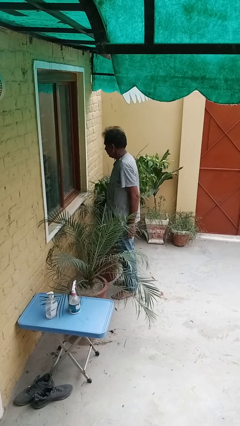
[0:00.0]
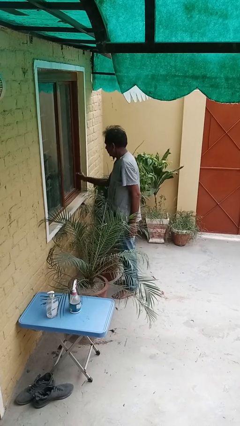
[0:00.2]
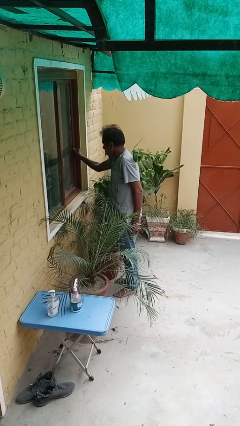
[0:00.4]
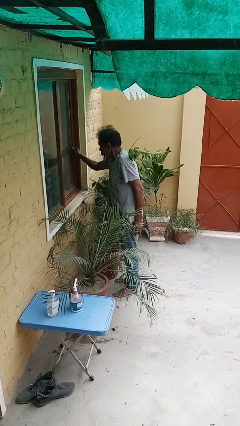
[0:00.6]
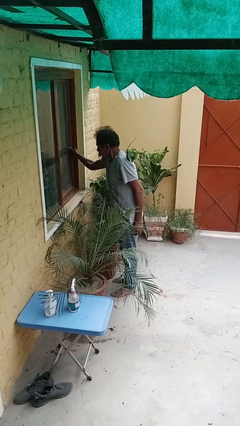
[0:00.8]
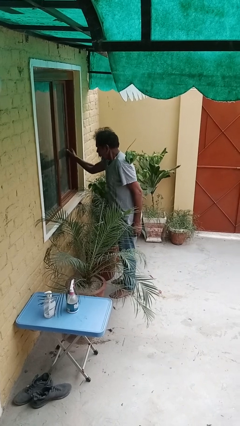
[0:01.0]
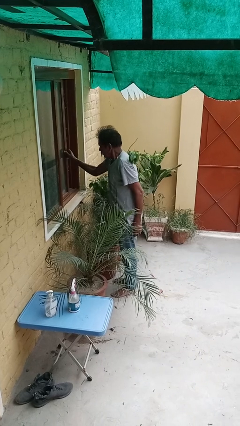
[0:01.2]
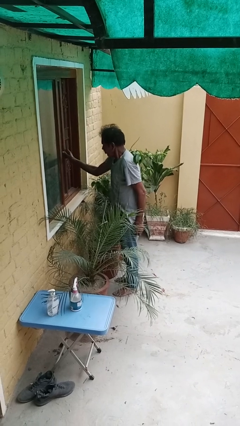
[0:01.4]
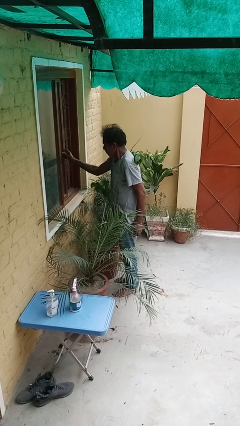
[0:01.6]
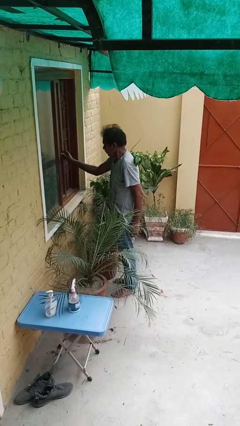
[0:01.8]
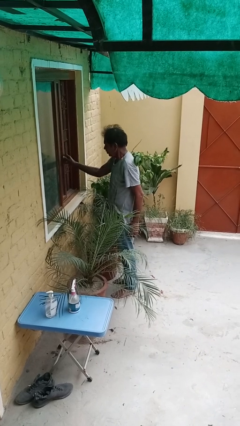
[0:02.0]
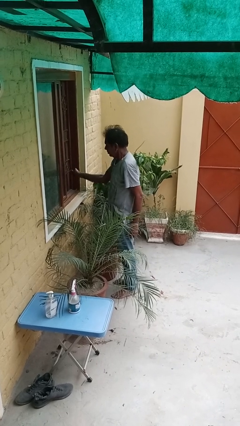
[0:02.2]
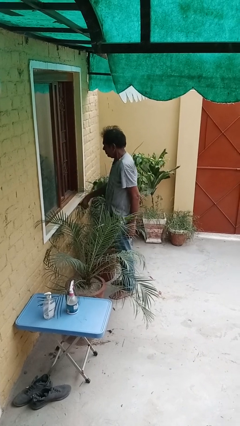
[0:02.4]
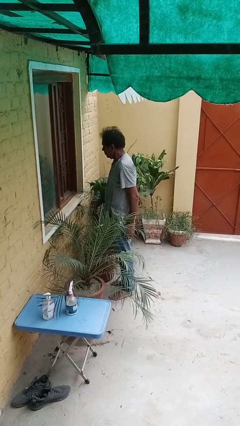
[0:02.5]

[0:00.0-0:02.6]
person opens home window

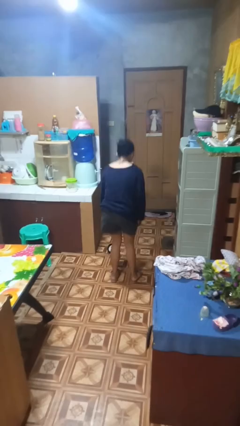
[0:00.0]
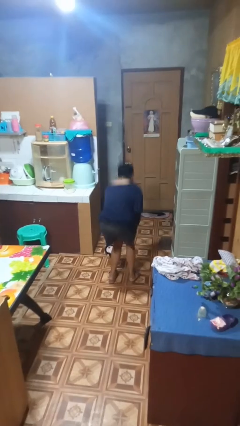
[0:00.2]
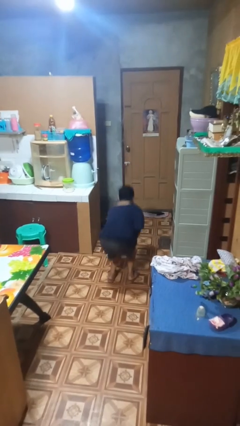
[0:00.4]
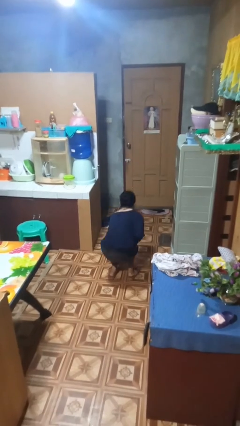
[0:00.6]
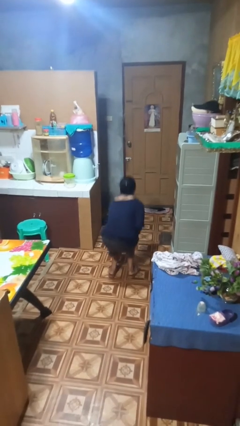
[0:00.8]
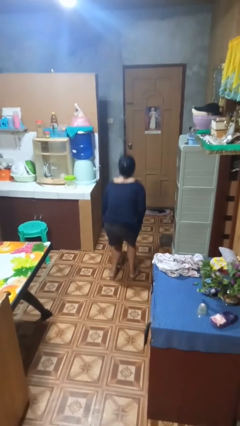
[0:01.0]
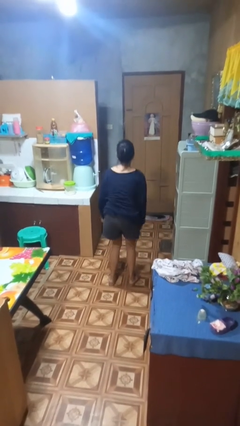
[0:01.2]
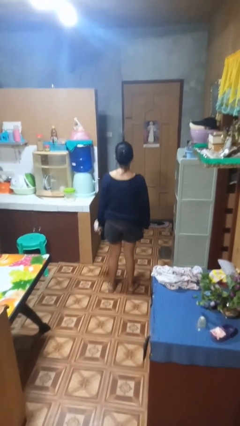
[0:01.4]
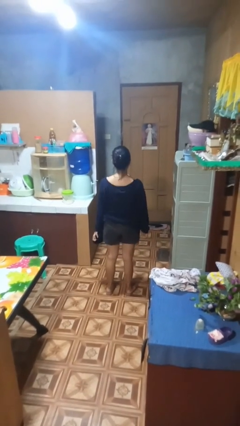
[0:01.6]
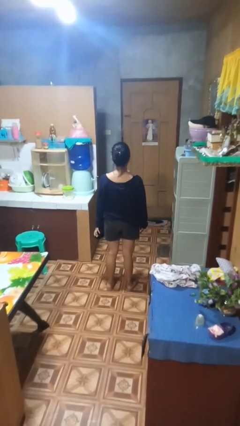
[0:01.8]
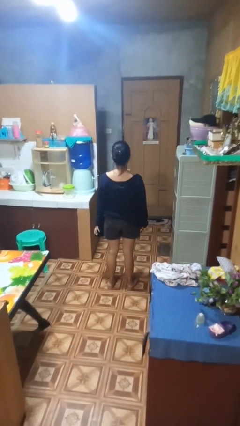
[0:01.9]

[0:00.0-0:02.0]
person picks up object from floor

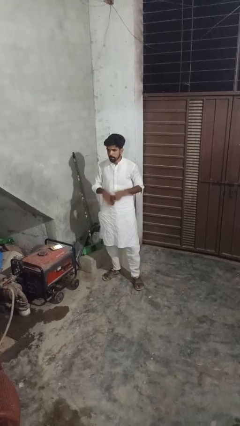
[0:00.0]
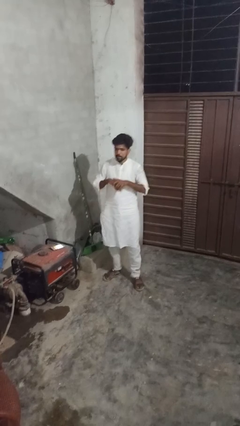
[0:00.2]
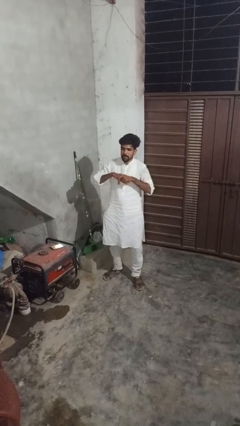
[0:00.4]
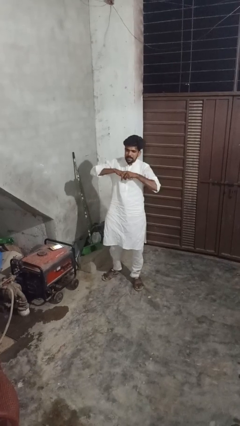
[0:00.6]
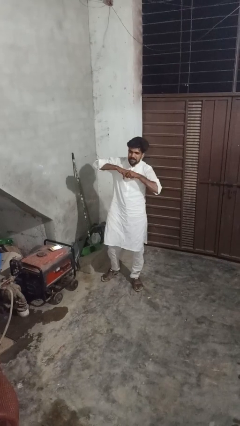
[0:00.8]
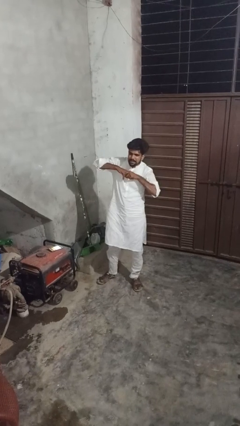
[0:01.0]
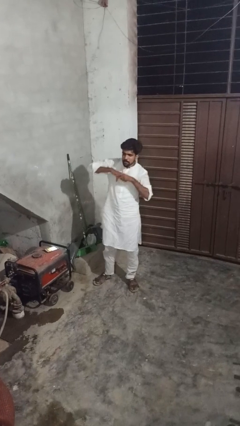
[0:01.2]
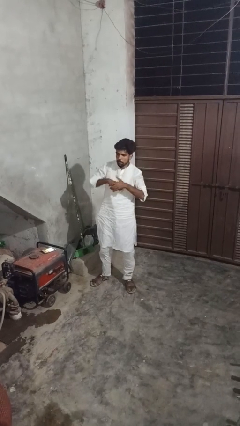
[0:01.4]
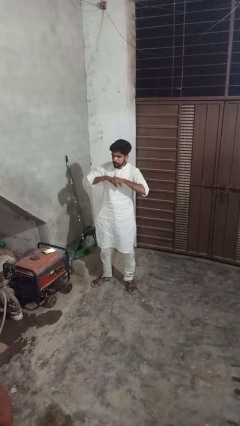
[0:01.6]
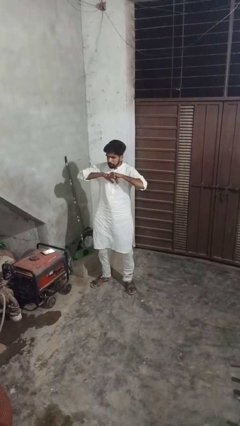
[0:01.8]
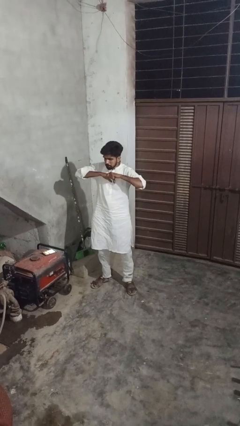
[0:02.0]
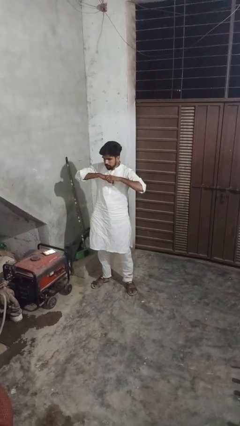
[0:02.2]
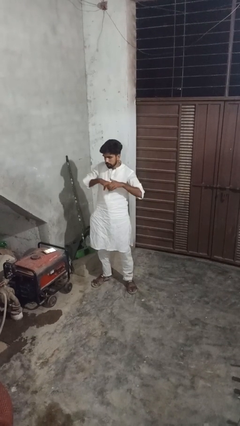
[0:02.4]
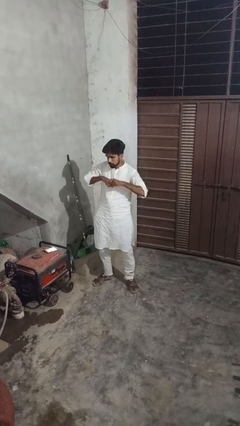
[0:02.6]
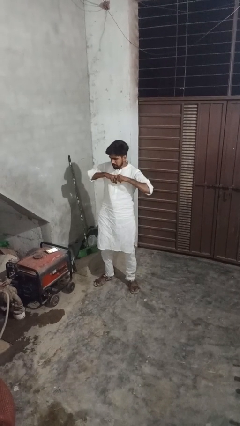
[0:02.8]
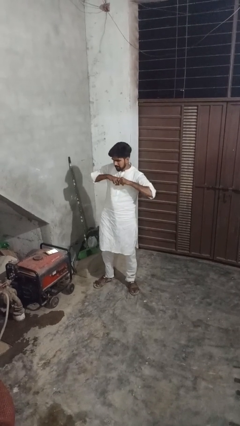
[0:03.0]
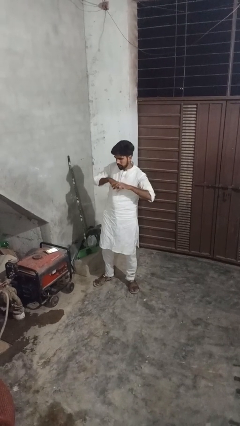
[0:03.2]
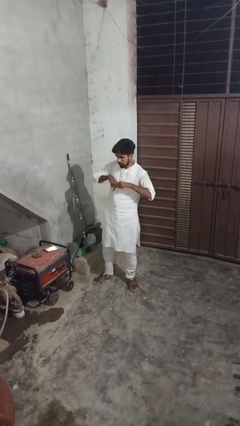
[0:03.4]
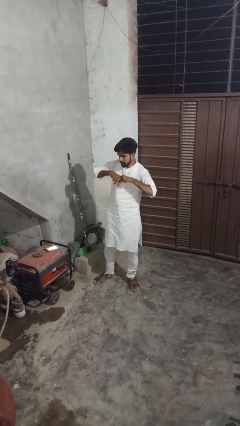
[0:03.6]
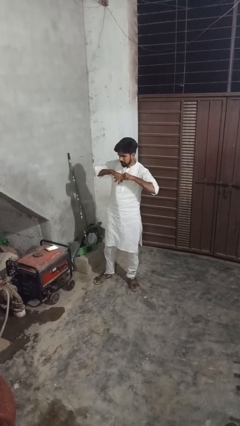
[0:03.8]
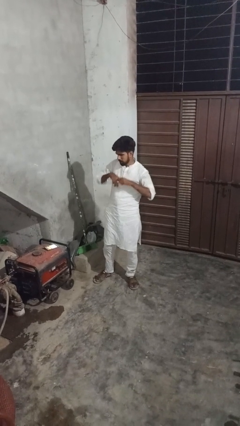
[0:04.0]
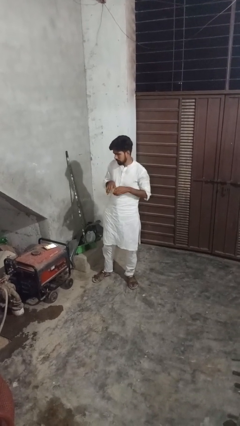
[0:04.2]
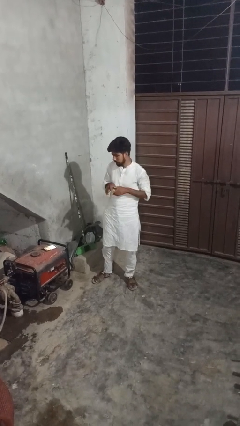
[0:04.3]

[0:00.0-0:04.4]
person cracks knuckles

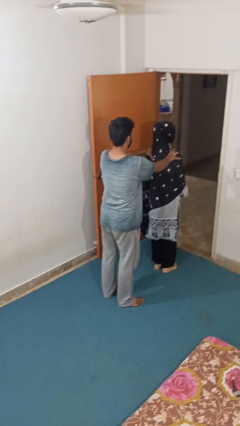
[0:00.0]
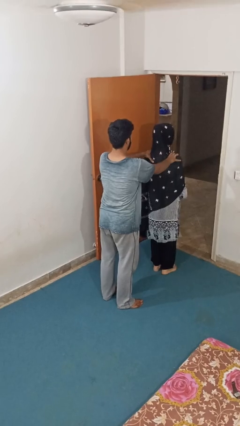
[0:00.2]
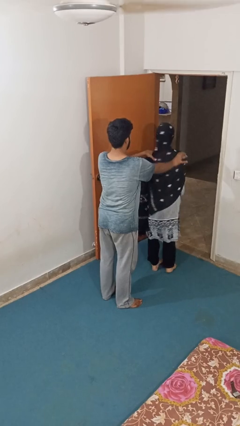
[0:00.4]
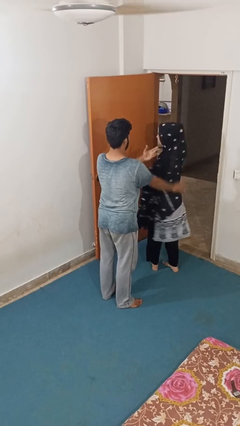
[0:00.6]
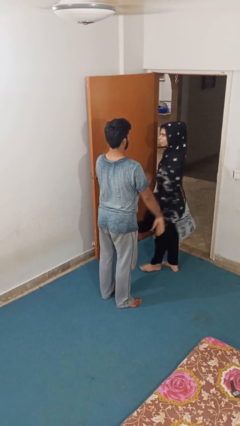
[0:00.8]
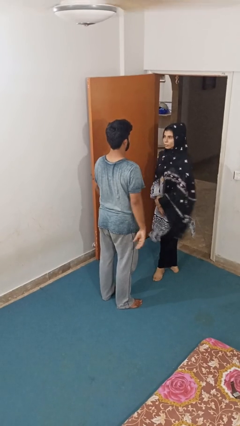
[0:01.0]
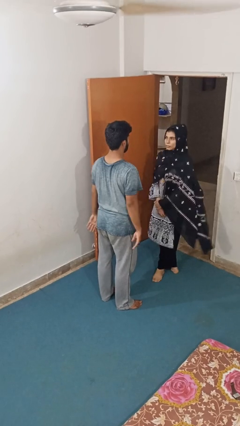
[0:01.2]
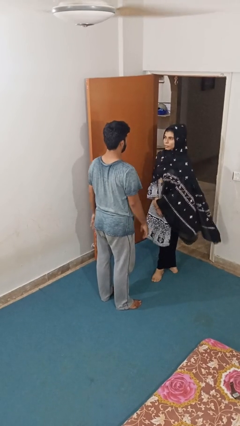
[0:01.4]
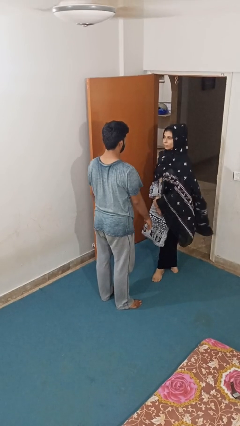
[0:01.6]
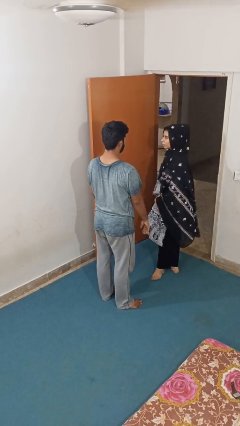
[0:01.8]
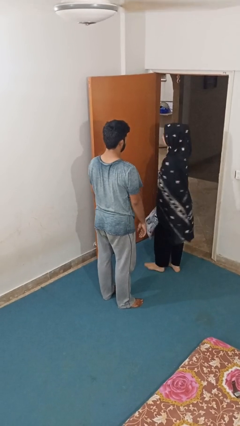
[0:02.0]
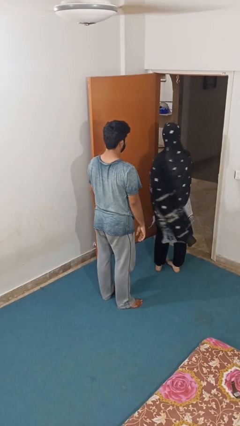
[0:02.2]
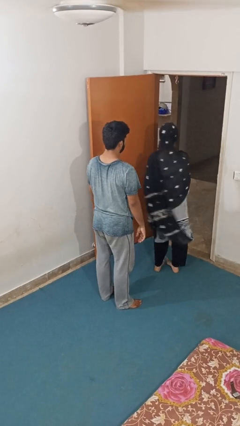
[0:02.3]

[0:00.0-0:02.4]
person spins person around

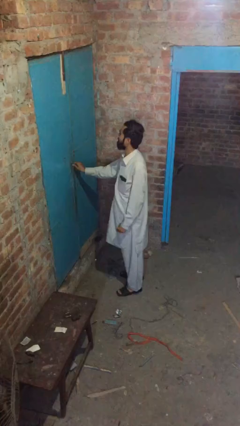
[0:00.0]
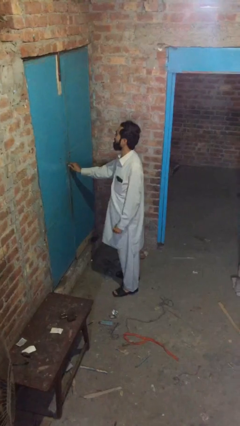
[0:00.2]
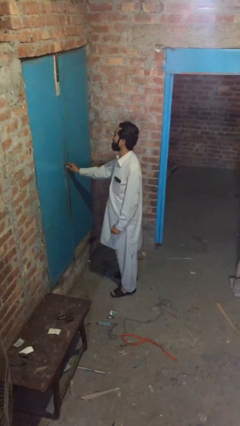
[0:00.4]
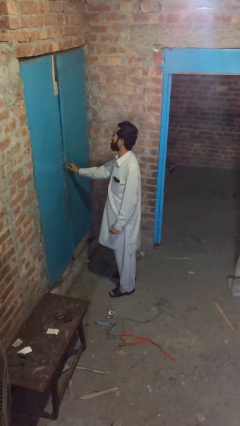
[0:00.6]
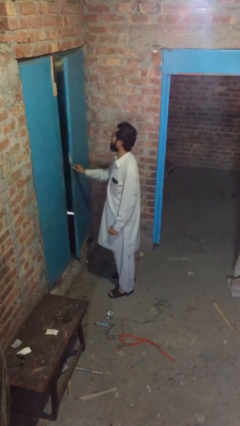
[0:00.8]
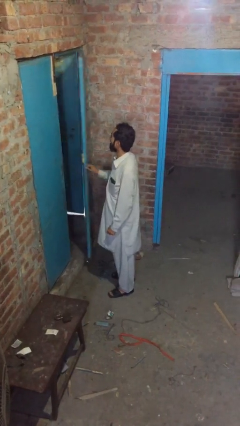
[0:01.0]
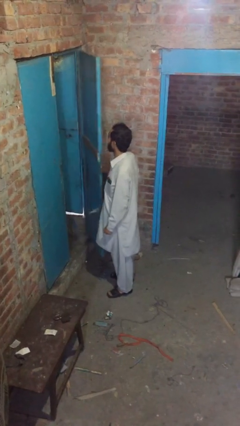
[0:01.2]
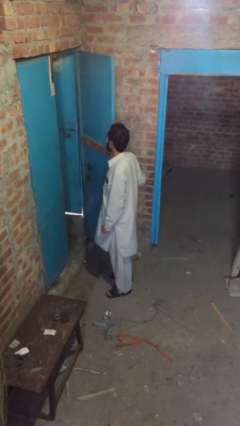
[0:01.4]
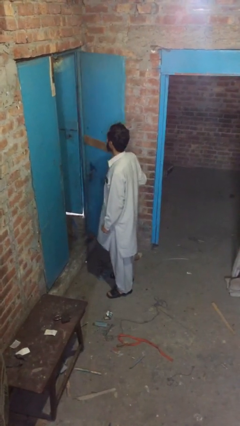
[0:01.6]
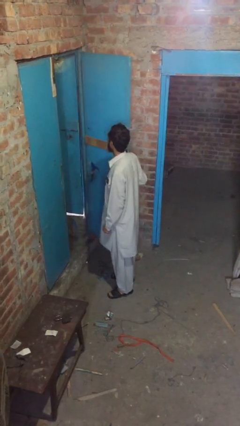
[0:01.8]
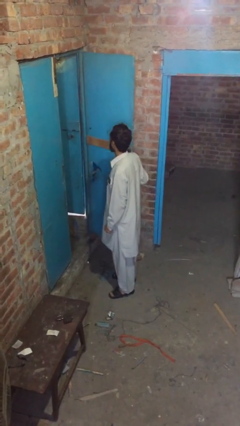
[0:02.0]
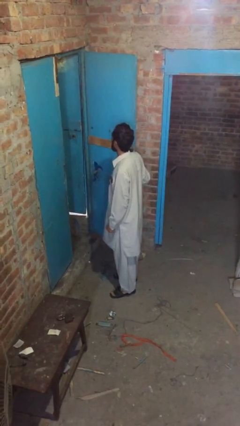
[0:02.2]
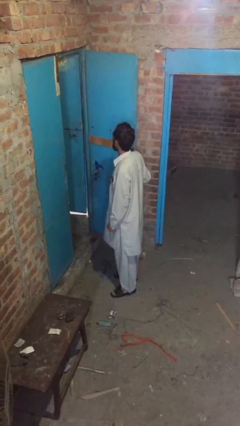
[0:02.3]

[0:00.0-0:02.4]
person opens facility door

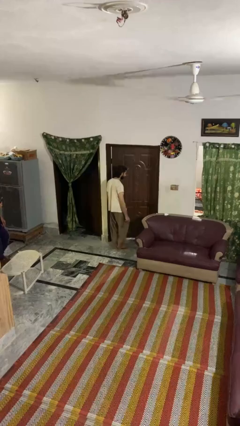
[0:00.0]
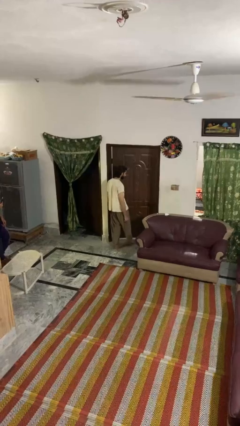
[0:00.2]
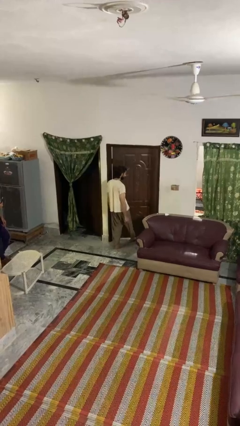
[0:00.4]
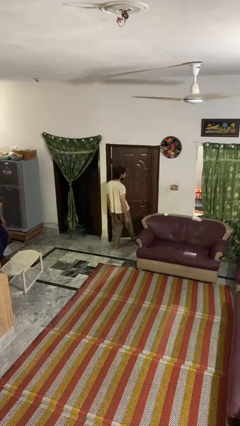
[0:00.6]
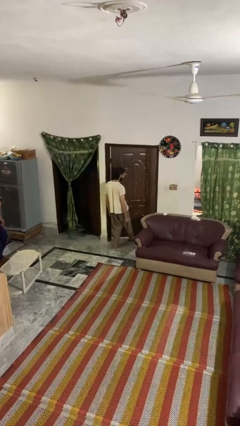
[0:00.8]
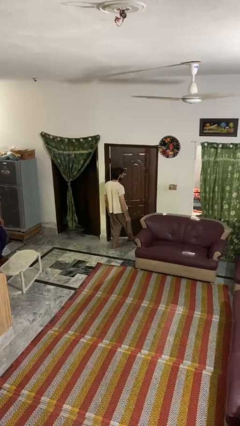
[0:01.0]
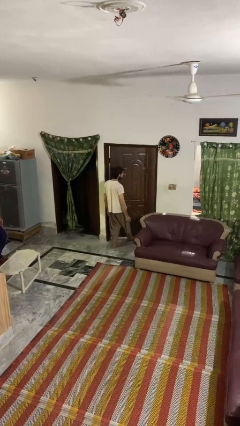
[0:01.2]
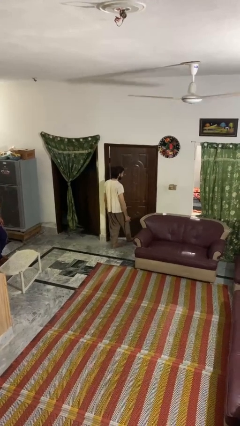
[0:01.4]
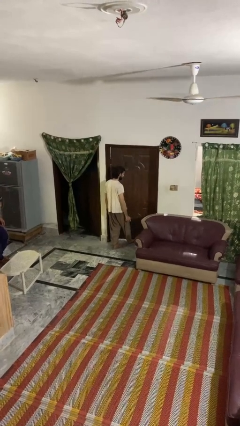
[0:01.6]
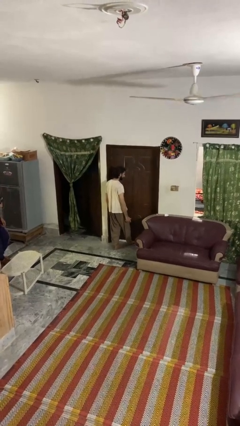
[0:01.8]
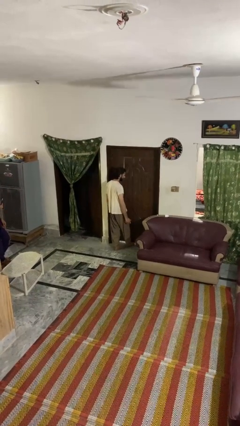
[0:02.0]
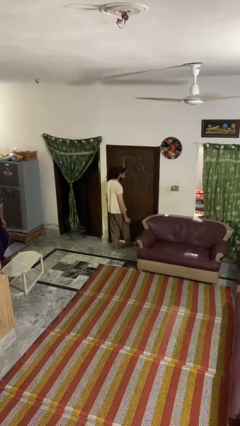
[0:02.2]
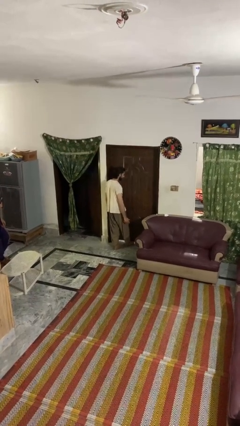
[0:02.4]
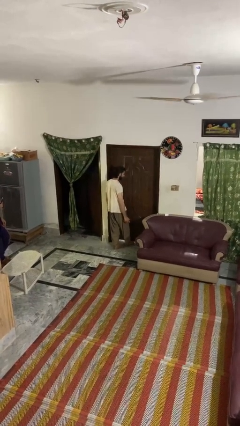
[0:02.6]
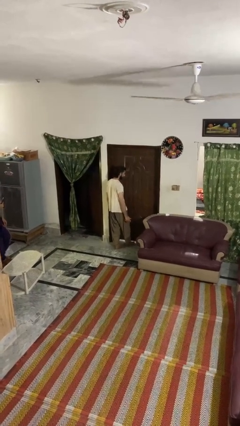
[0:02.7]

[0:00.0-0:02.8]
person closes door with foot

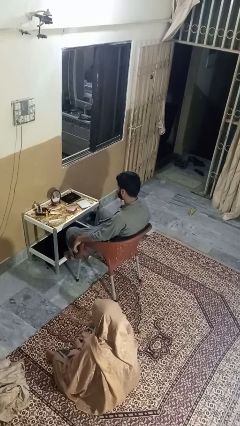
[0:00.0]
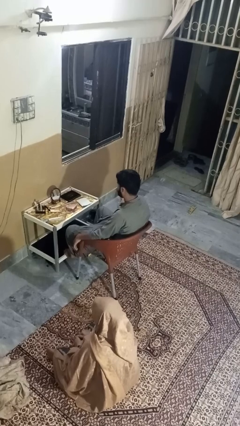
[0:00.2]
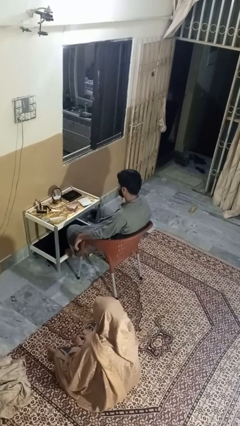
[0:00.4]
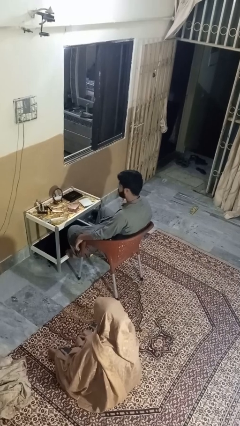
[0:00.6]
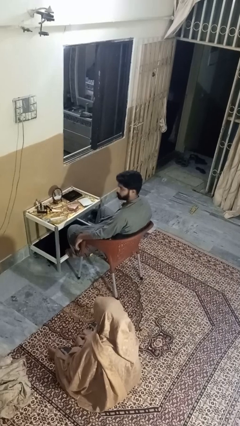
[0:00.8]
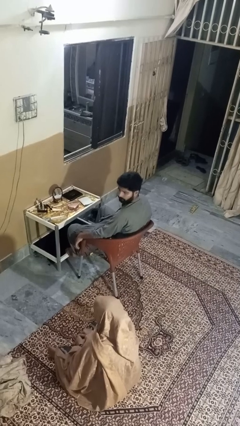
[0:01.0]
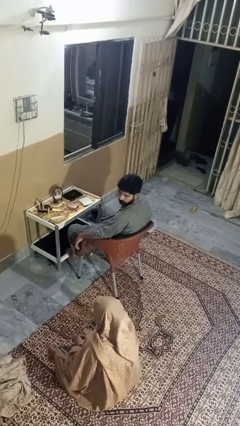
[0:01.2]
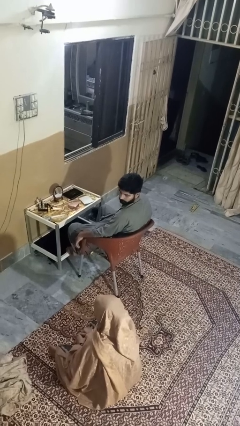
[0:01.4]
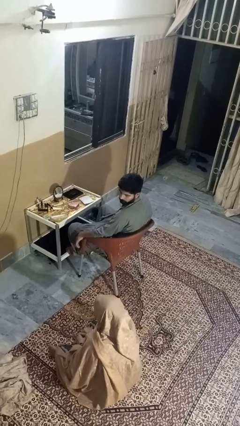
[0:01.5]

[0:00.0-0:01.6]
person looks over shoulder
